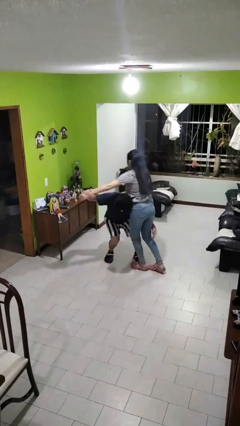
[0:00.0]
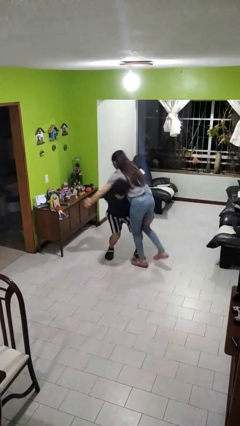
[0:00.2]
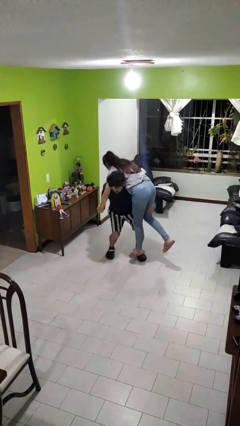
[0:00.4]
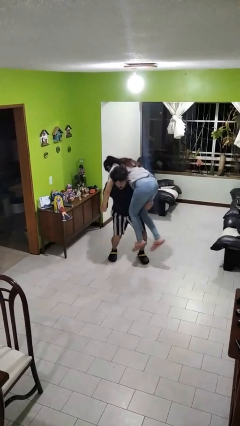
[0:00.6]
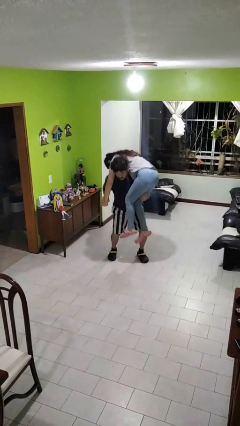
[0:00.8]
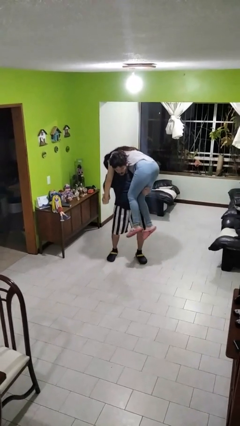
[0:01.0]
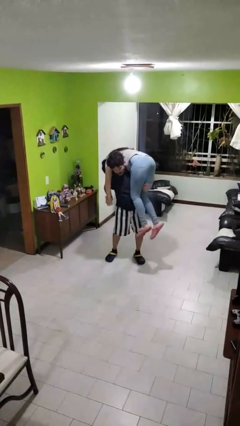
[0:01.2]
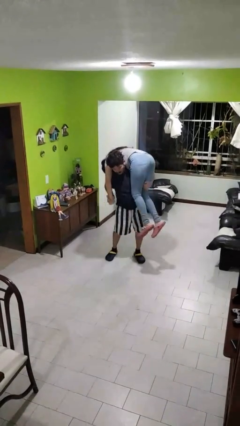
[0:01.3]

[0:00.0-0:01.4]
person carries person over shoulder

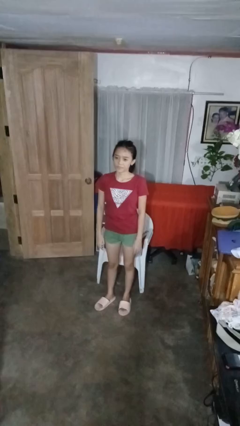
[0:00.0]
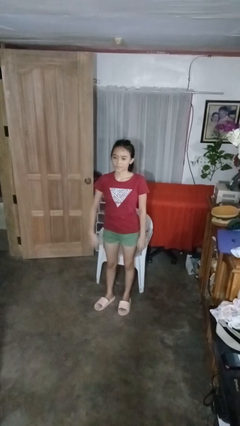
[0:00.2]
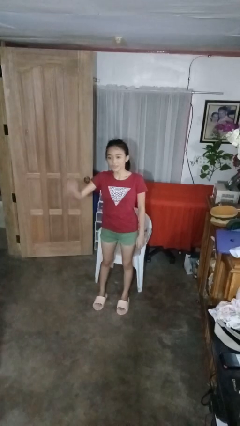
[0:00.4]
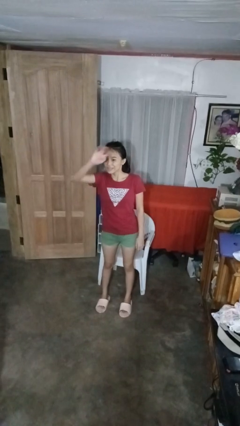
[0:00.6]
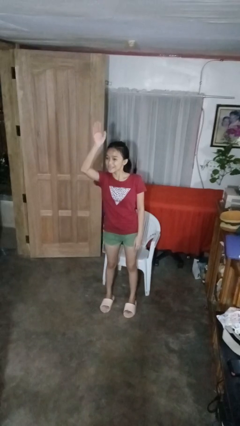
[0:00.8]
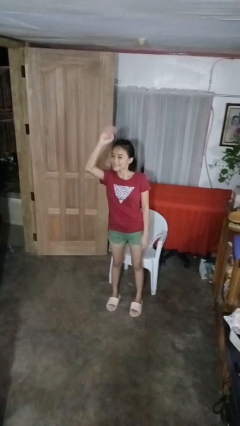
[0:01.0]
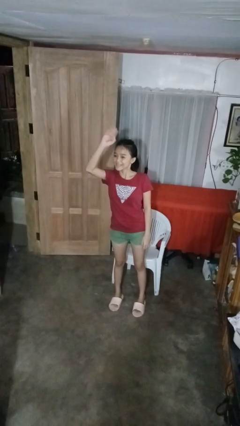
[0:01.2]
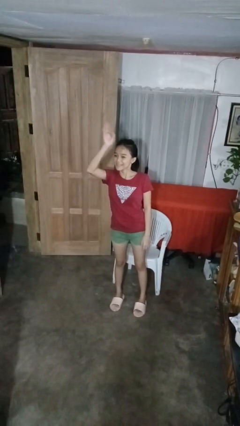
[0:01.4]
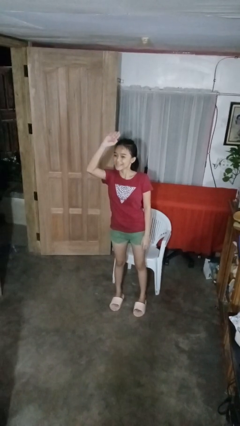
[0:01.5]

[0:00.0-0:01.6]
person waves at person

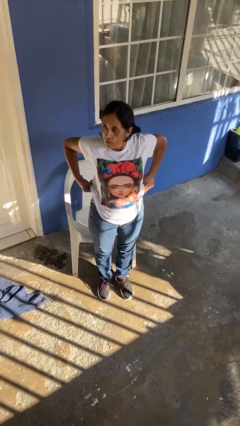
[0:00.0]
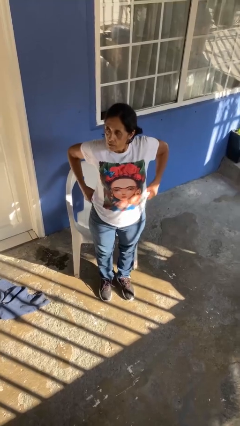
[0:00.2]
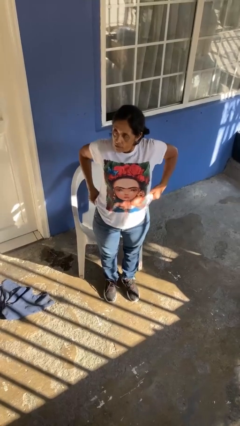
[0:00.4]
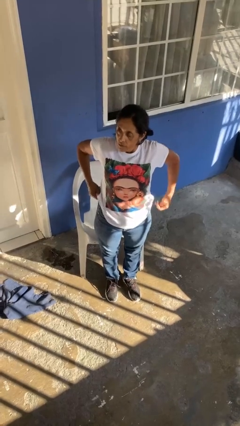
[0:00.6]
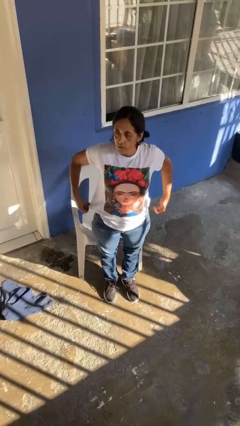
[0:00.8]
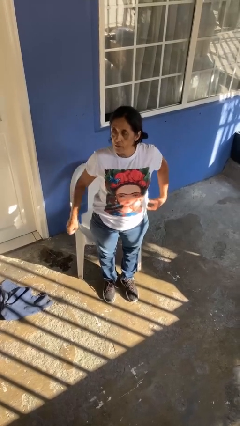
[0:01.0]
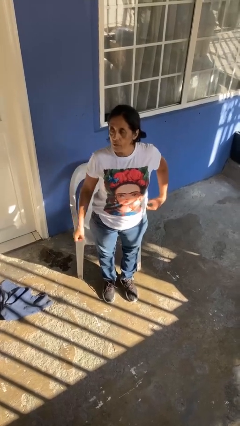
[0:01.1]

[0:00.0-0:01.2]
person hikes up pants

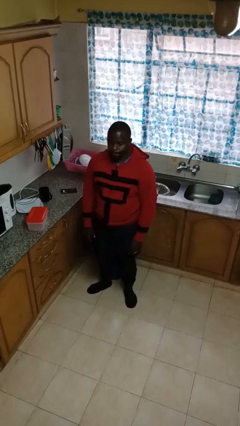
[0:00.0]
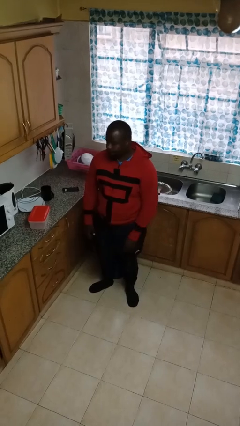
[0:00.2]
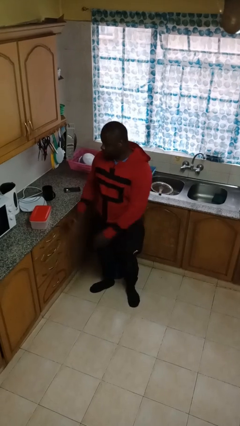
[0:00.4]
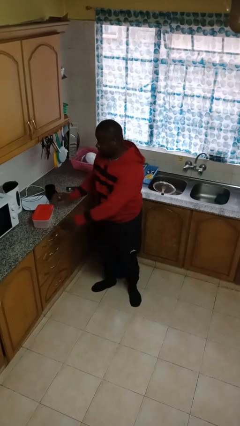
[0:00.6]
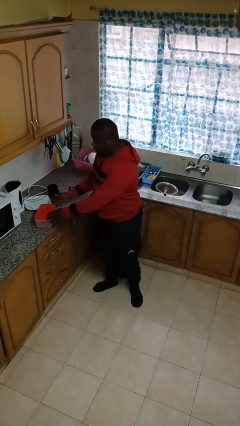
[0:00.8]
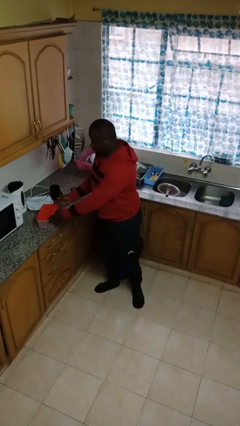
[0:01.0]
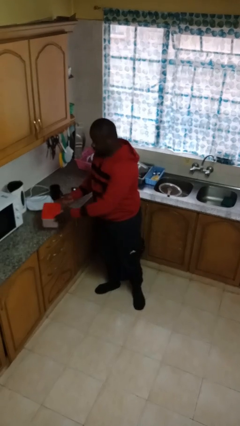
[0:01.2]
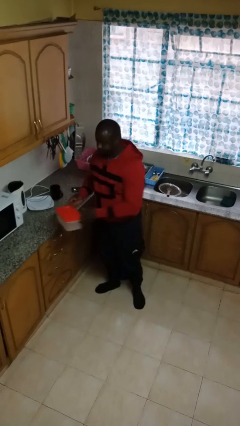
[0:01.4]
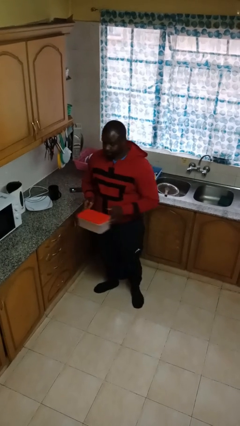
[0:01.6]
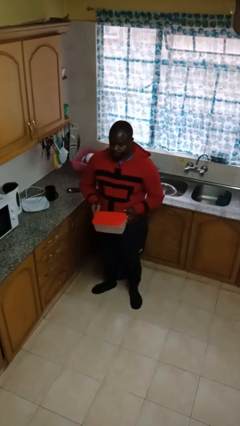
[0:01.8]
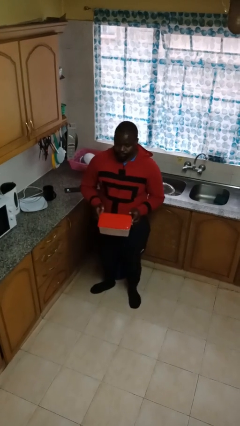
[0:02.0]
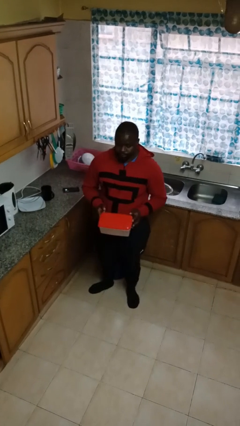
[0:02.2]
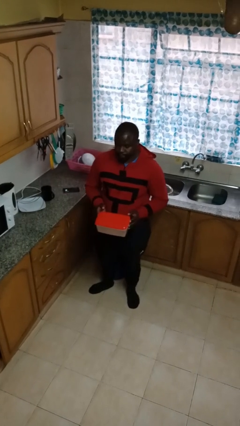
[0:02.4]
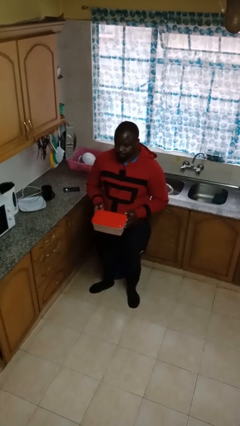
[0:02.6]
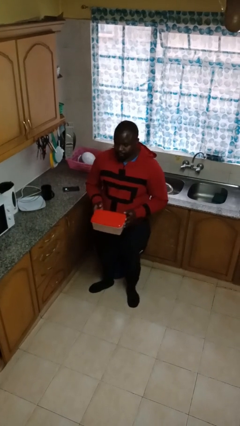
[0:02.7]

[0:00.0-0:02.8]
person picks up object from countertop

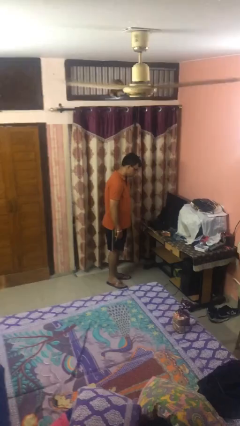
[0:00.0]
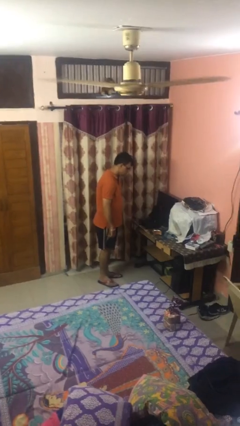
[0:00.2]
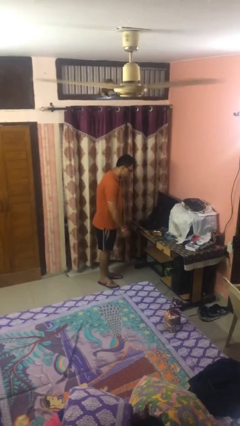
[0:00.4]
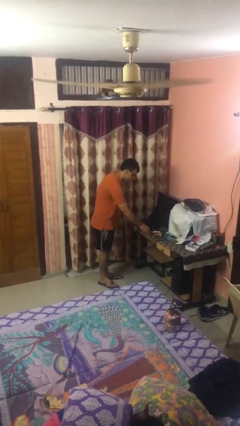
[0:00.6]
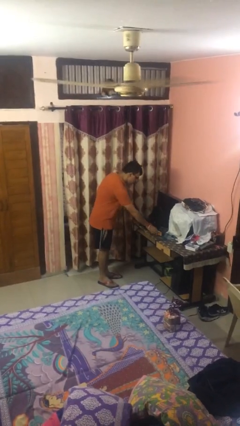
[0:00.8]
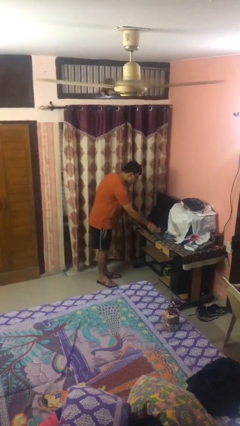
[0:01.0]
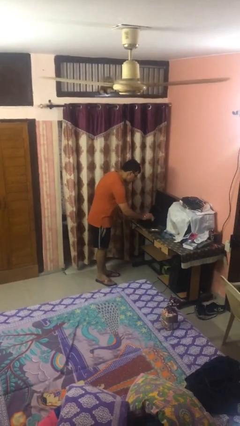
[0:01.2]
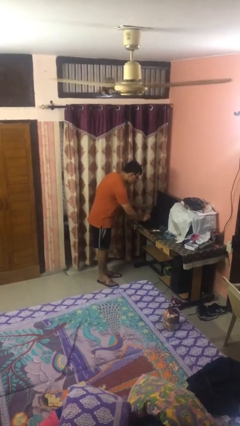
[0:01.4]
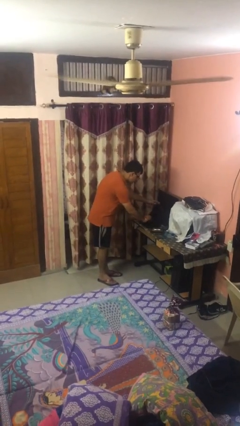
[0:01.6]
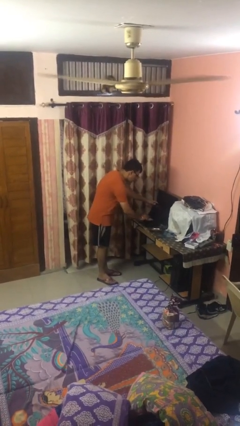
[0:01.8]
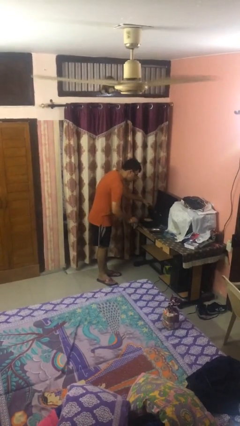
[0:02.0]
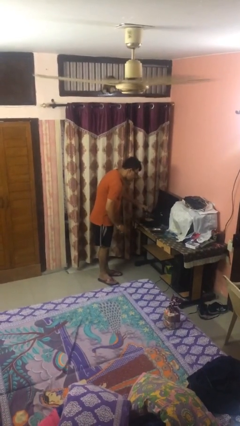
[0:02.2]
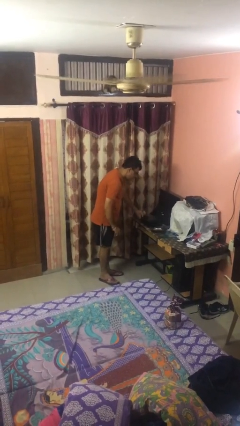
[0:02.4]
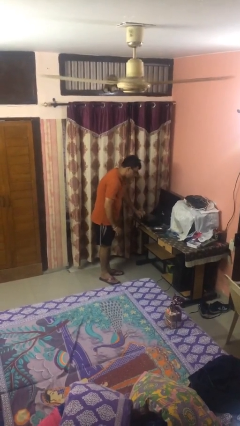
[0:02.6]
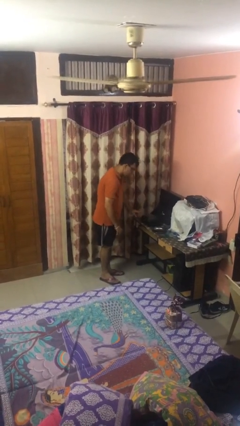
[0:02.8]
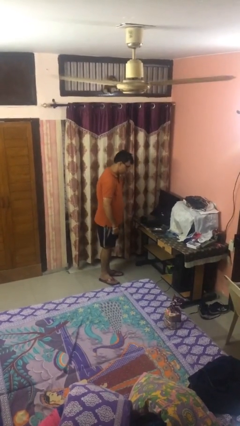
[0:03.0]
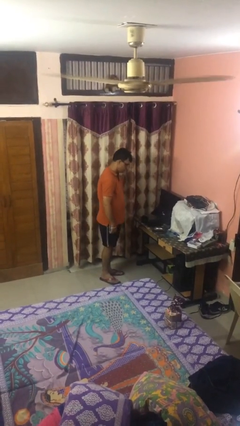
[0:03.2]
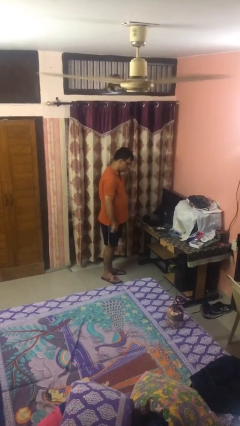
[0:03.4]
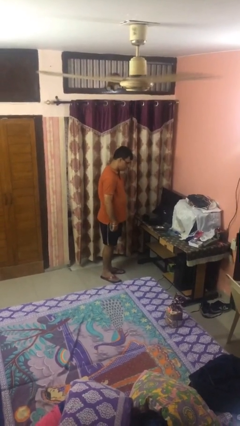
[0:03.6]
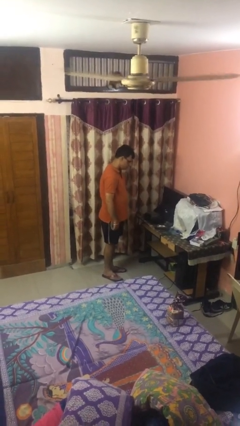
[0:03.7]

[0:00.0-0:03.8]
person puts object into toaster

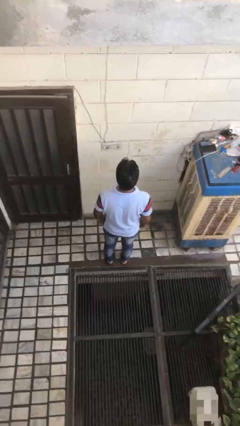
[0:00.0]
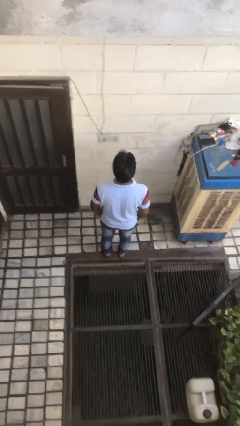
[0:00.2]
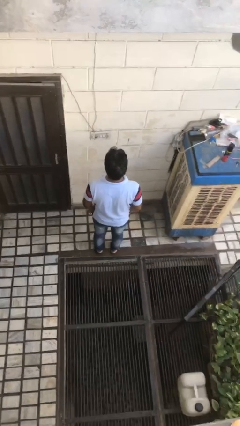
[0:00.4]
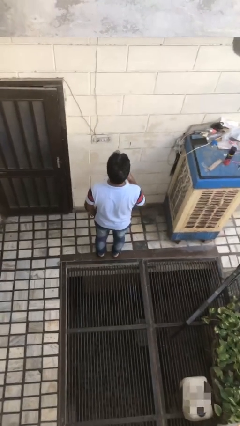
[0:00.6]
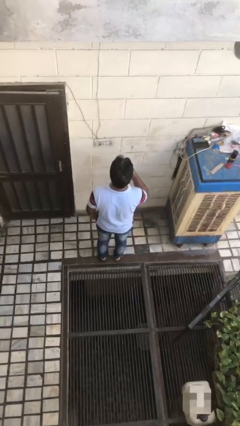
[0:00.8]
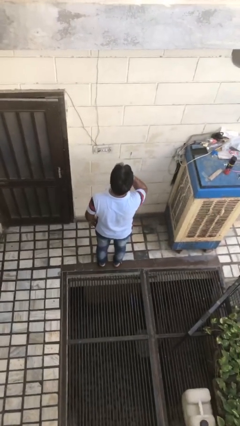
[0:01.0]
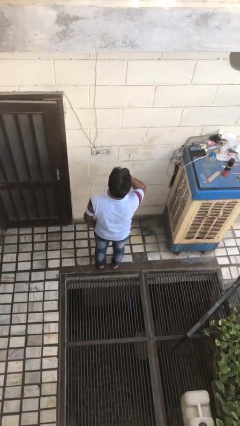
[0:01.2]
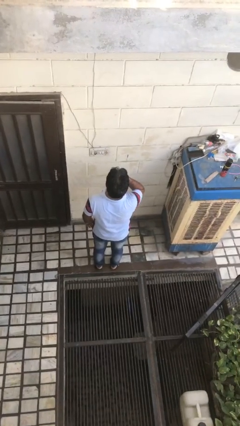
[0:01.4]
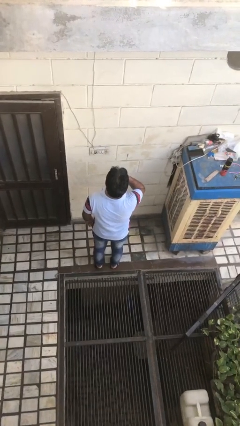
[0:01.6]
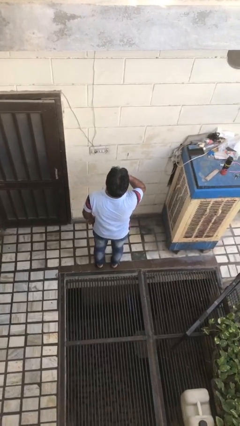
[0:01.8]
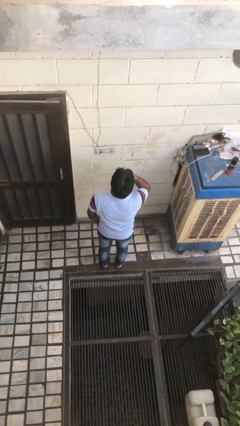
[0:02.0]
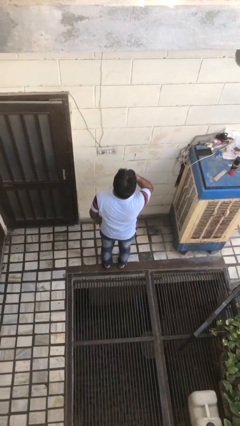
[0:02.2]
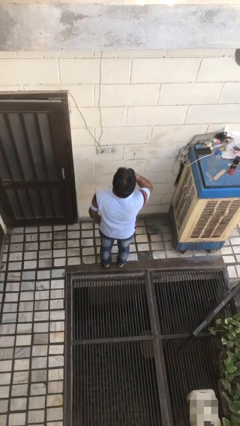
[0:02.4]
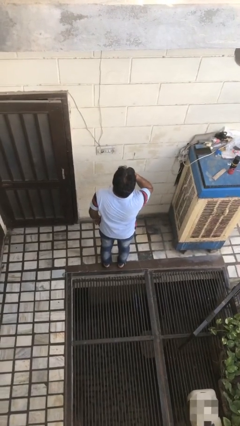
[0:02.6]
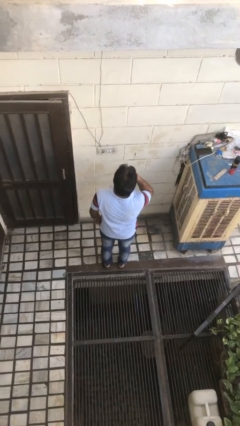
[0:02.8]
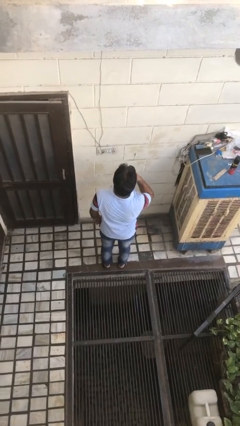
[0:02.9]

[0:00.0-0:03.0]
person yawns

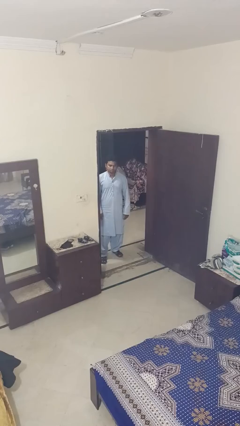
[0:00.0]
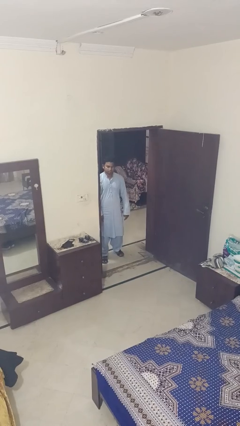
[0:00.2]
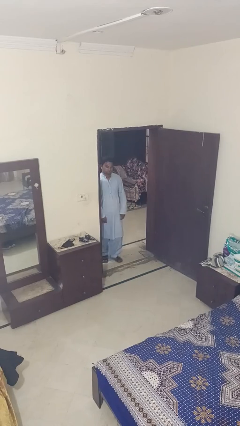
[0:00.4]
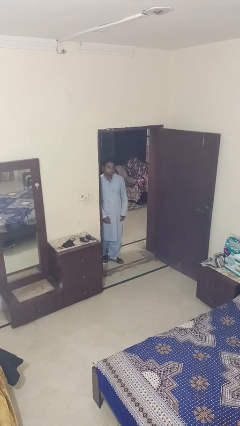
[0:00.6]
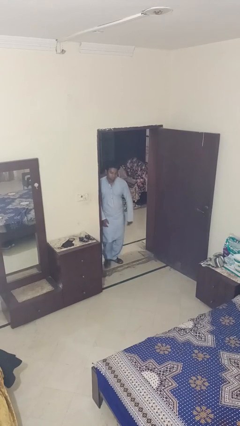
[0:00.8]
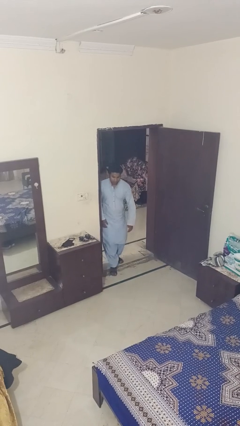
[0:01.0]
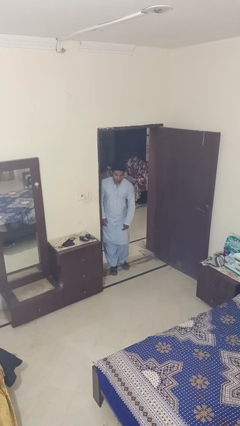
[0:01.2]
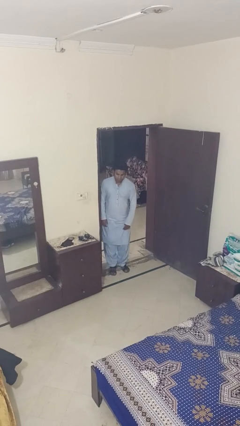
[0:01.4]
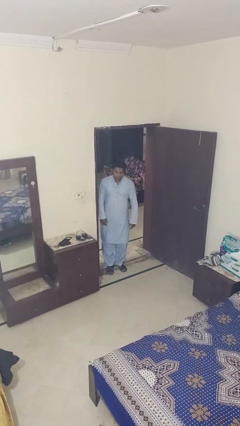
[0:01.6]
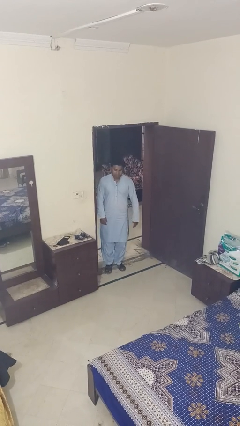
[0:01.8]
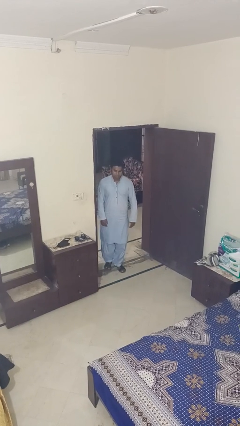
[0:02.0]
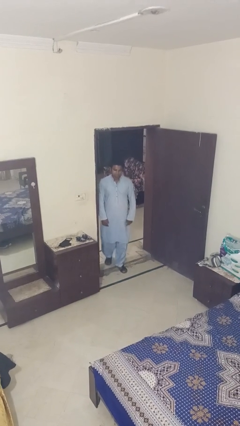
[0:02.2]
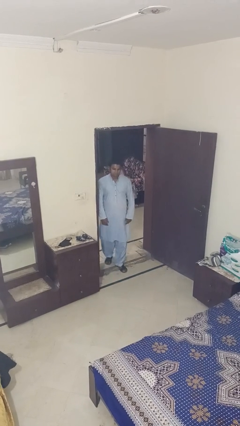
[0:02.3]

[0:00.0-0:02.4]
person bumps into wall

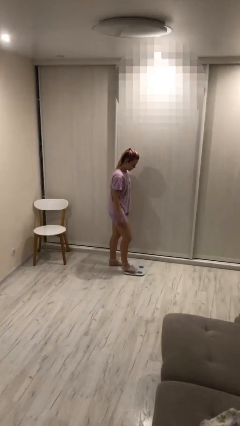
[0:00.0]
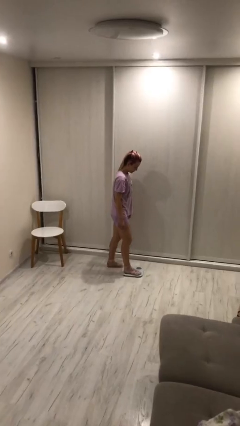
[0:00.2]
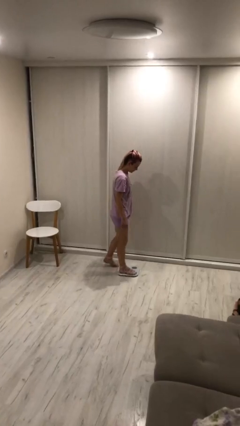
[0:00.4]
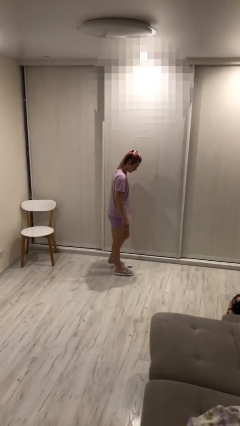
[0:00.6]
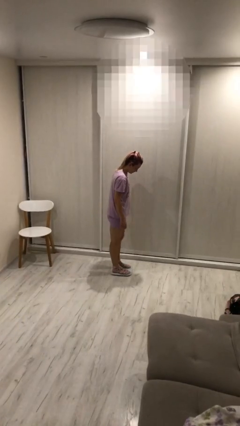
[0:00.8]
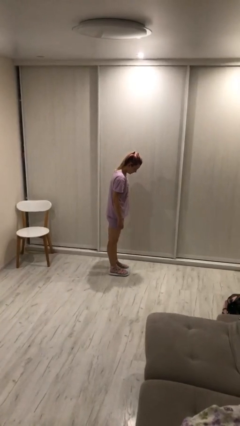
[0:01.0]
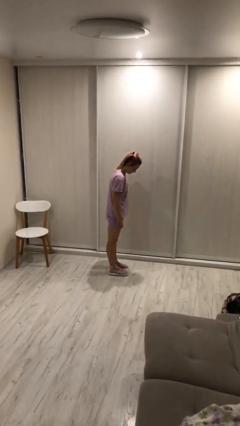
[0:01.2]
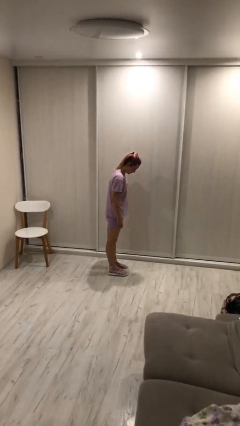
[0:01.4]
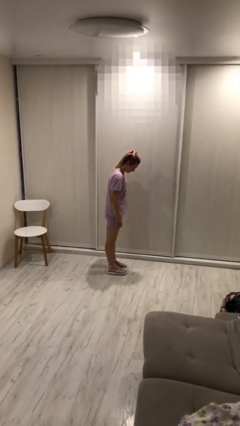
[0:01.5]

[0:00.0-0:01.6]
person uses bodyweight scale
